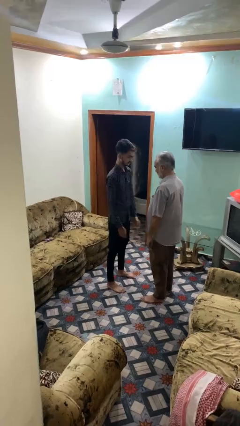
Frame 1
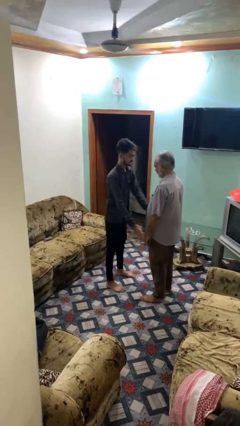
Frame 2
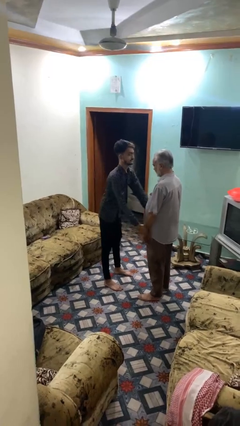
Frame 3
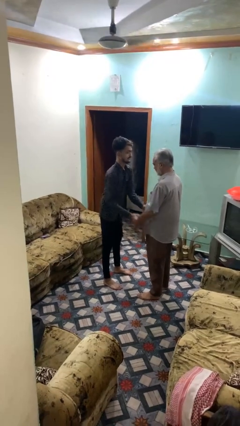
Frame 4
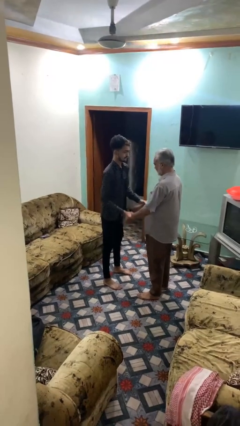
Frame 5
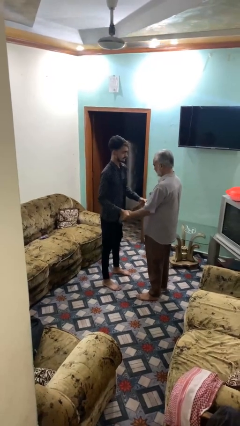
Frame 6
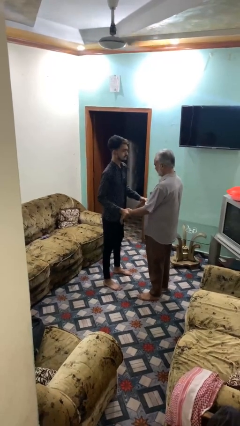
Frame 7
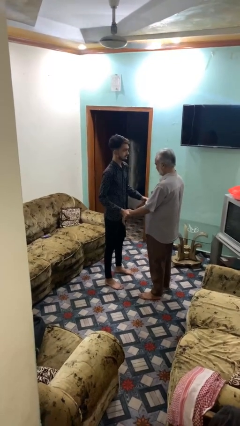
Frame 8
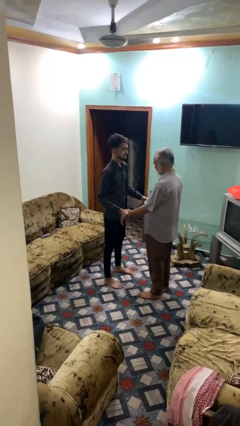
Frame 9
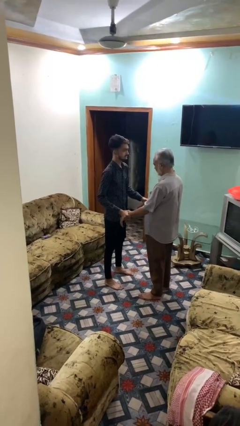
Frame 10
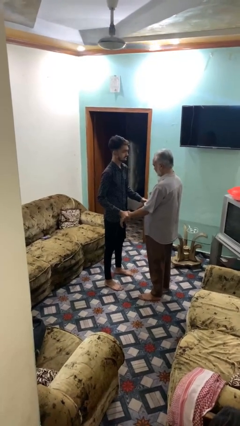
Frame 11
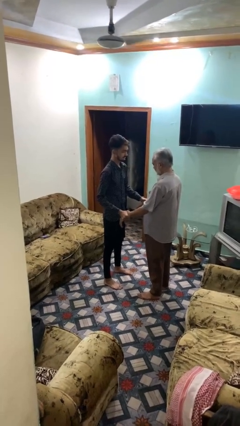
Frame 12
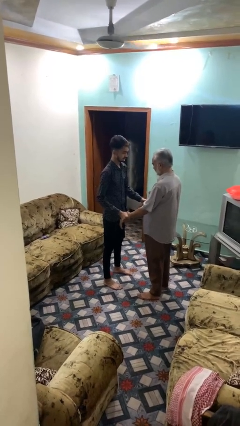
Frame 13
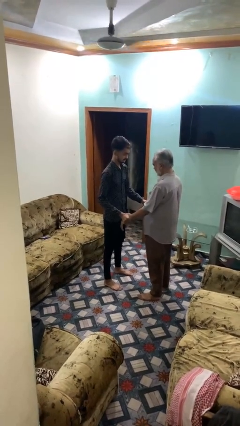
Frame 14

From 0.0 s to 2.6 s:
person grabs person by forearm

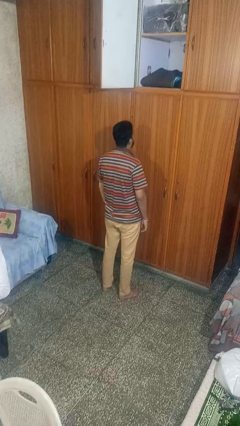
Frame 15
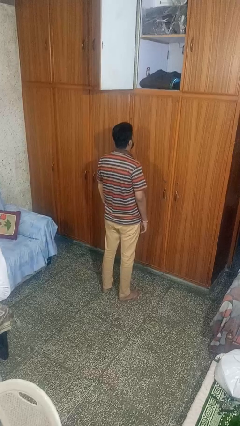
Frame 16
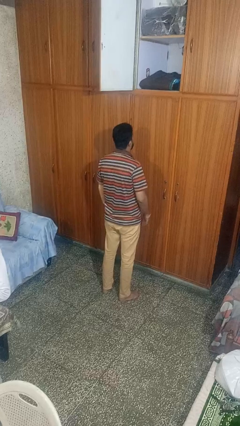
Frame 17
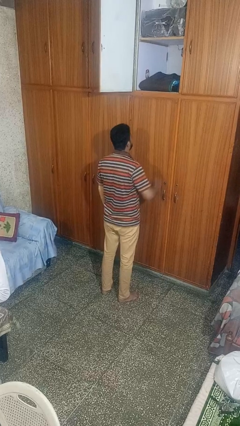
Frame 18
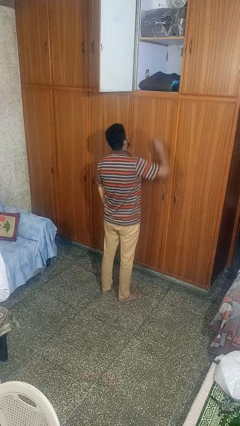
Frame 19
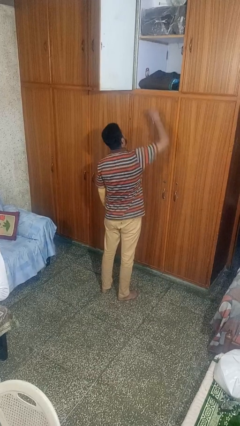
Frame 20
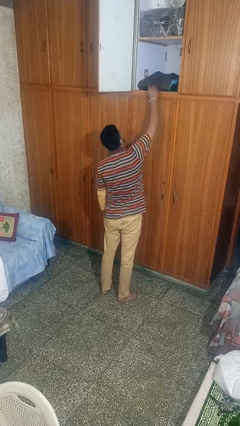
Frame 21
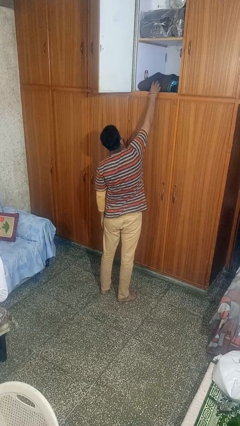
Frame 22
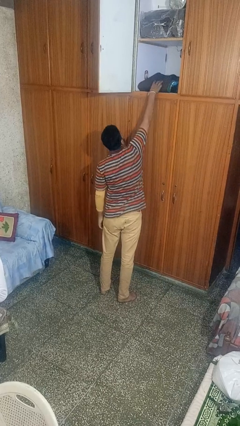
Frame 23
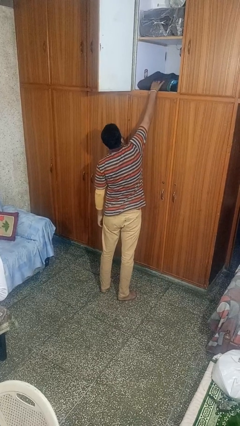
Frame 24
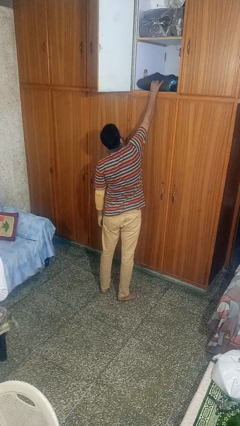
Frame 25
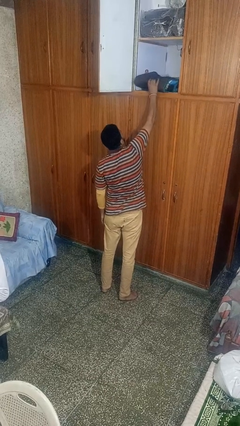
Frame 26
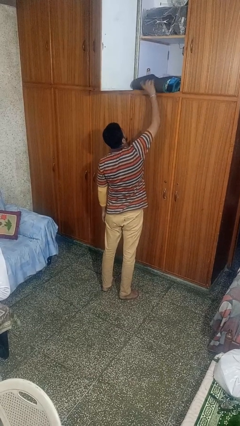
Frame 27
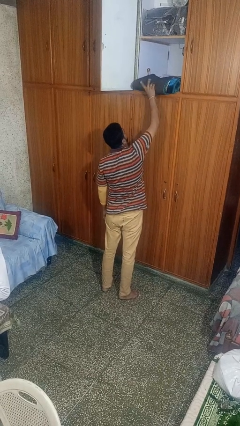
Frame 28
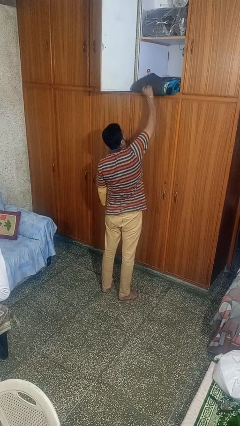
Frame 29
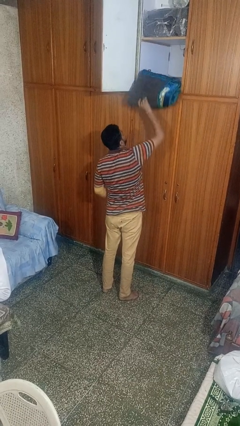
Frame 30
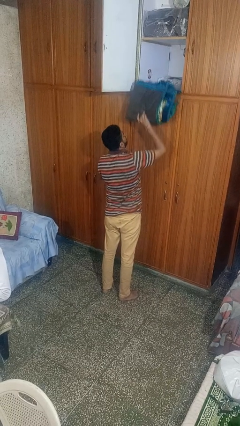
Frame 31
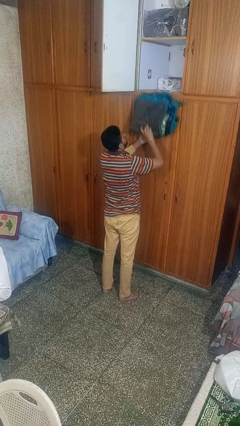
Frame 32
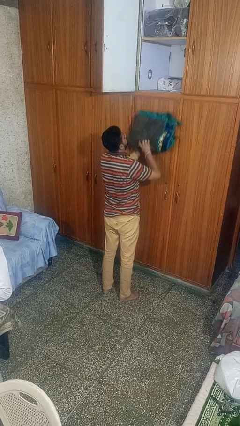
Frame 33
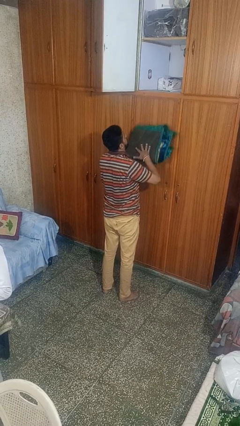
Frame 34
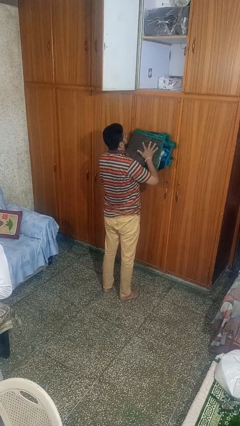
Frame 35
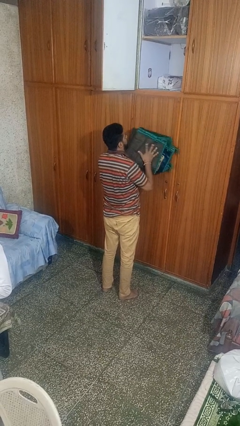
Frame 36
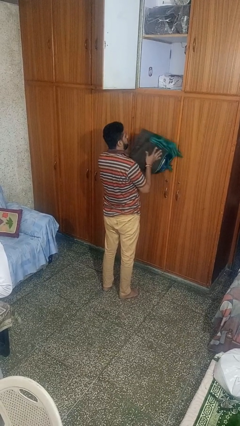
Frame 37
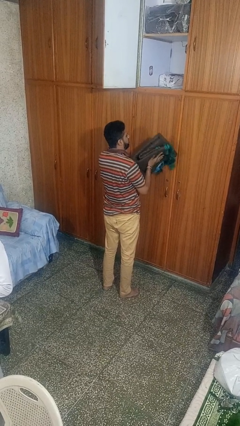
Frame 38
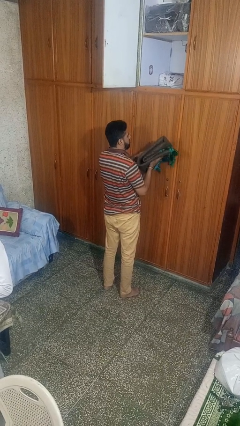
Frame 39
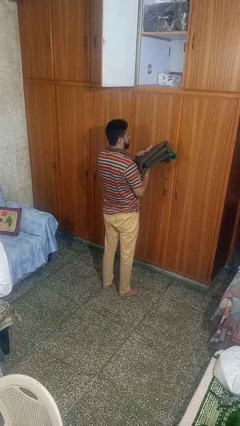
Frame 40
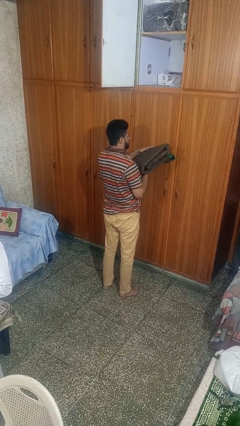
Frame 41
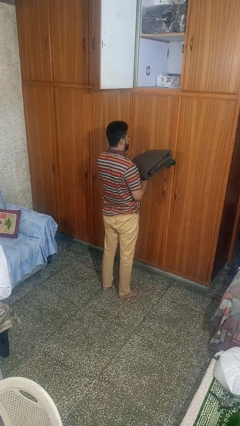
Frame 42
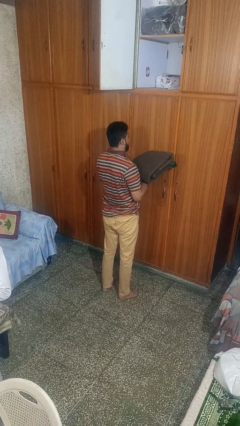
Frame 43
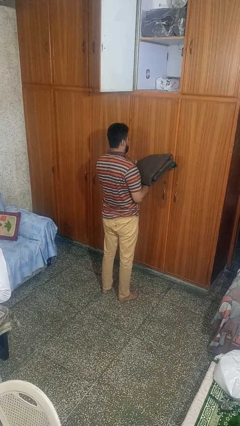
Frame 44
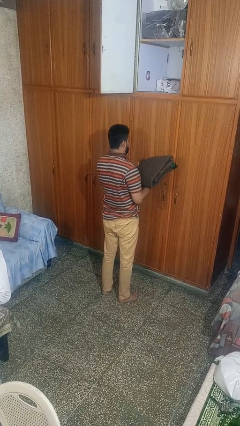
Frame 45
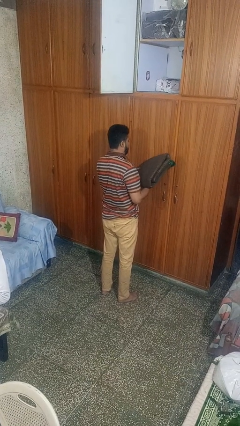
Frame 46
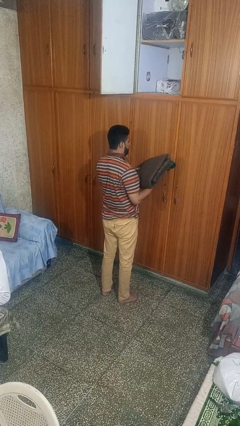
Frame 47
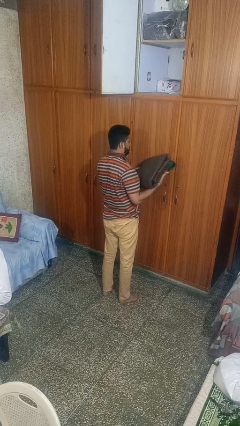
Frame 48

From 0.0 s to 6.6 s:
person picks up object from shelf

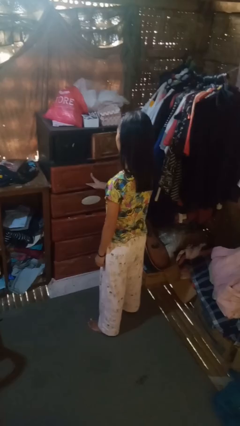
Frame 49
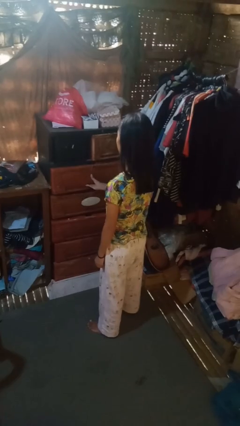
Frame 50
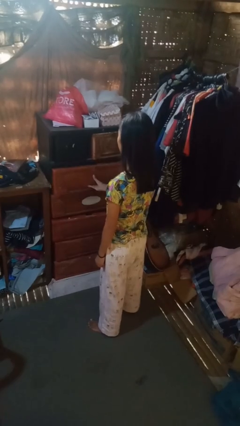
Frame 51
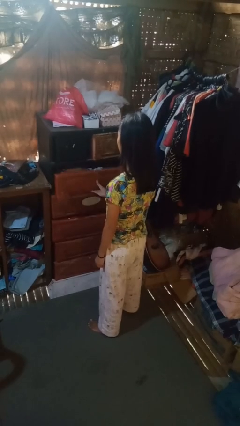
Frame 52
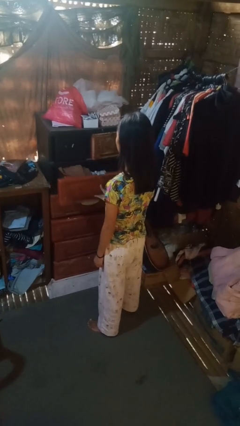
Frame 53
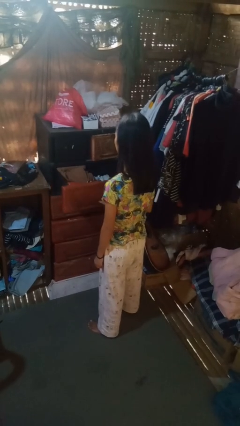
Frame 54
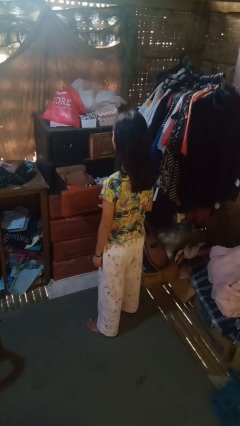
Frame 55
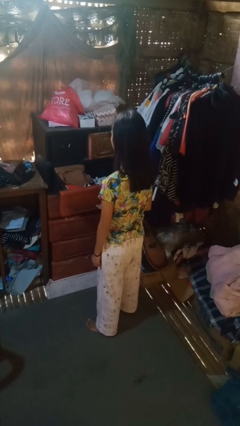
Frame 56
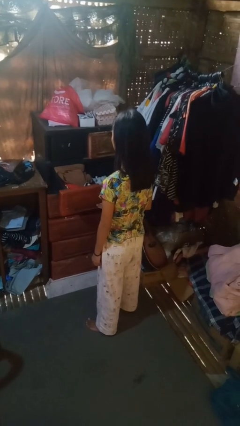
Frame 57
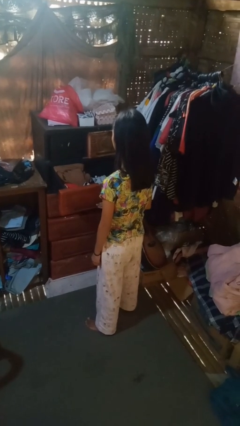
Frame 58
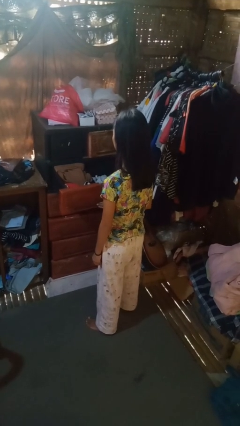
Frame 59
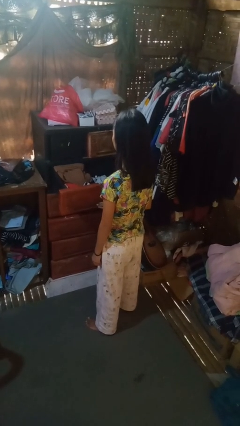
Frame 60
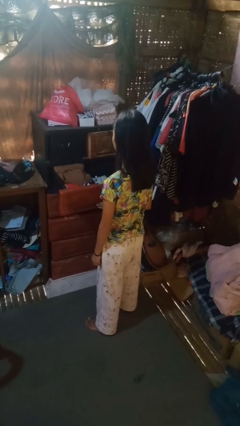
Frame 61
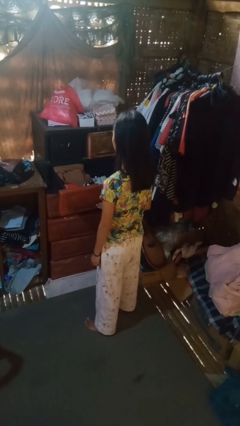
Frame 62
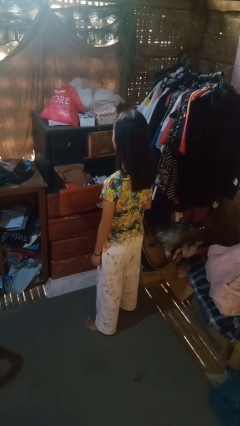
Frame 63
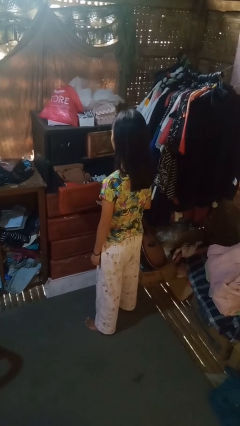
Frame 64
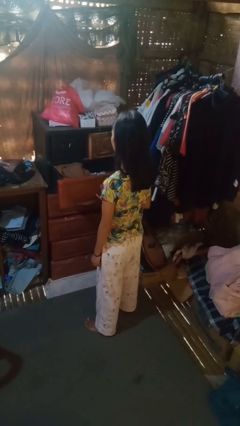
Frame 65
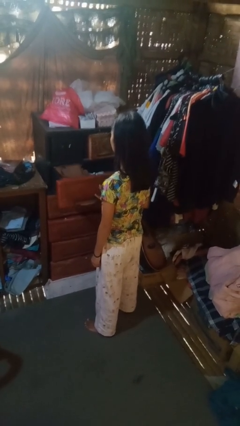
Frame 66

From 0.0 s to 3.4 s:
person opens dresser drawer

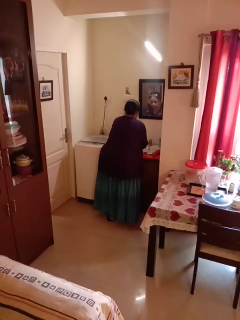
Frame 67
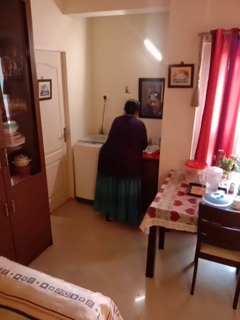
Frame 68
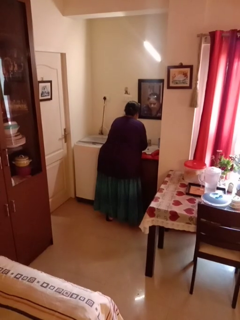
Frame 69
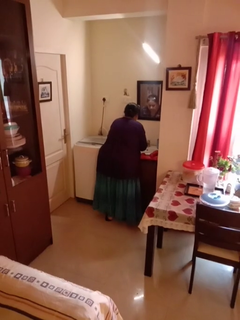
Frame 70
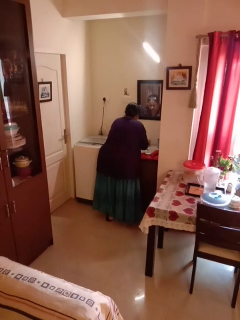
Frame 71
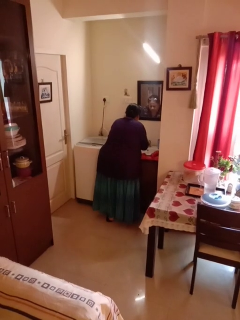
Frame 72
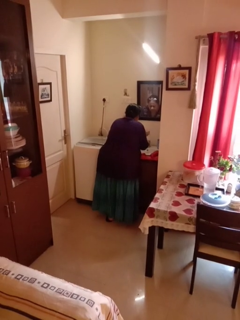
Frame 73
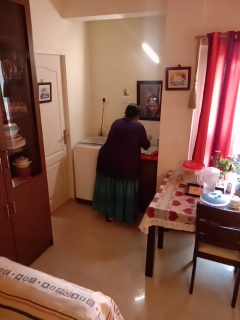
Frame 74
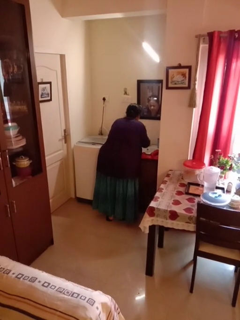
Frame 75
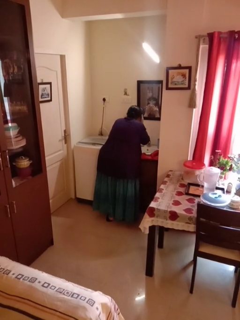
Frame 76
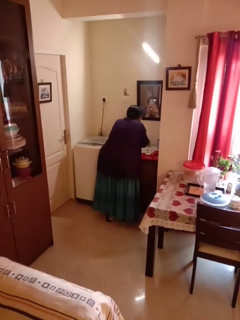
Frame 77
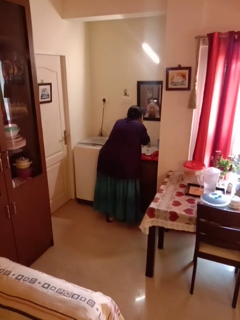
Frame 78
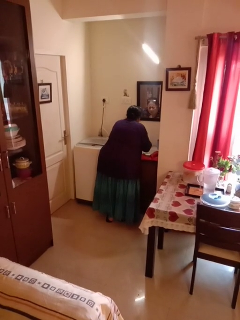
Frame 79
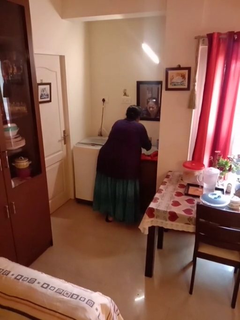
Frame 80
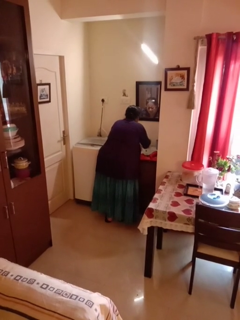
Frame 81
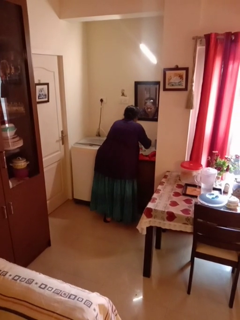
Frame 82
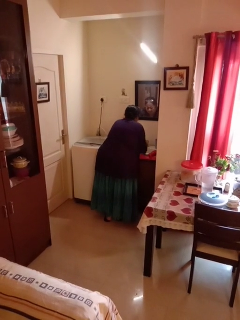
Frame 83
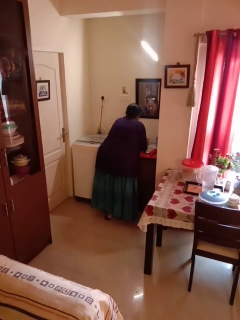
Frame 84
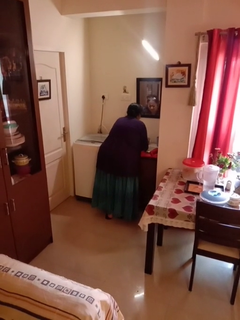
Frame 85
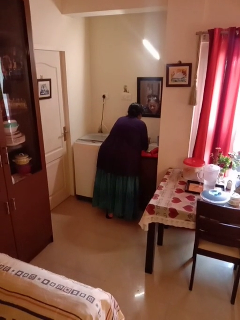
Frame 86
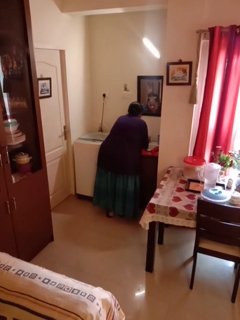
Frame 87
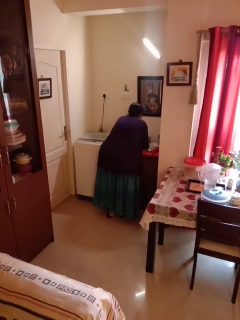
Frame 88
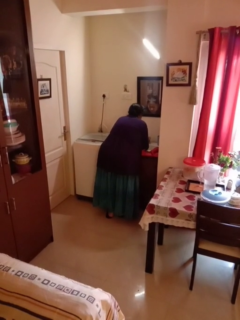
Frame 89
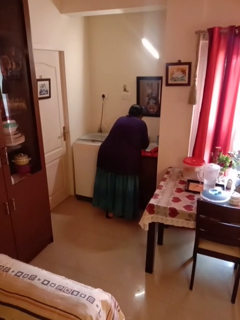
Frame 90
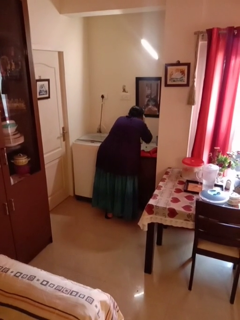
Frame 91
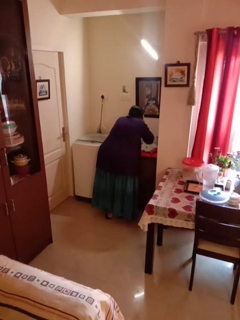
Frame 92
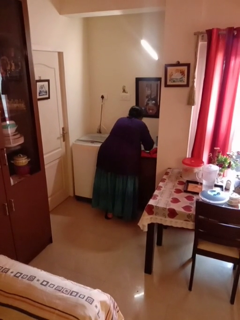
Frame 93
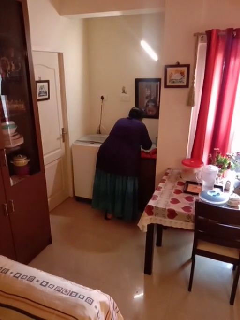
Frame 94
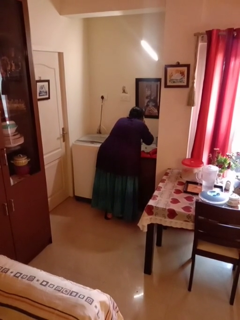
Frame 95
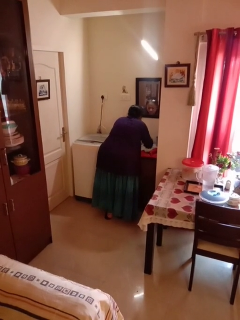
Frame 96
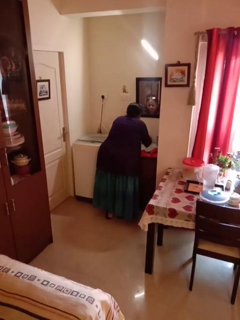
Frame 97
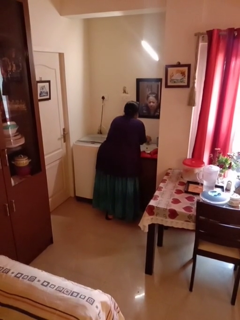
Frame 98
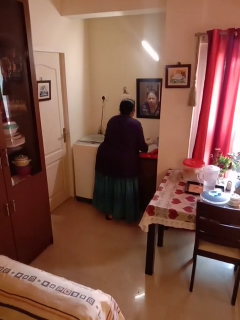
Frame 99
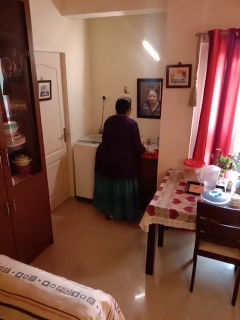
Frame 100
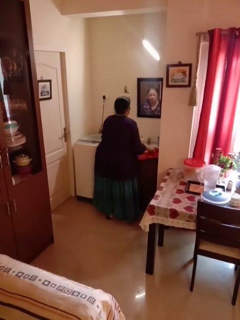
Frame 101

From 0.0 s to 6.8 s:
person washes face

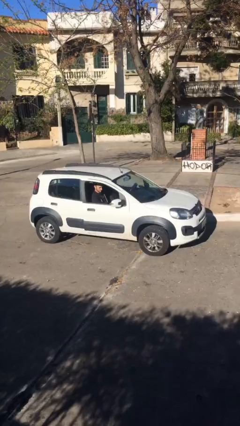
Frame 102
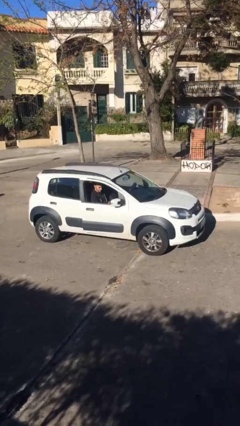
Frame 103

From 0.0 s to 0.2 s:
car drops off person
